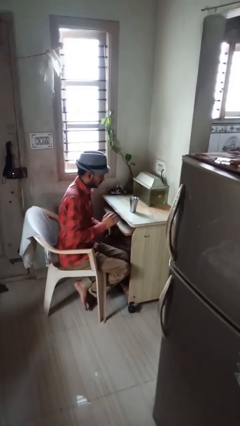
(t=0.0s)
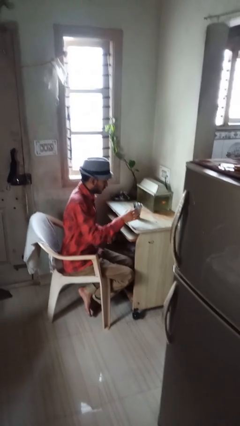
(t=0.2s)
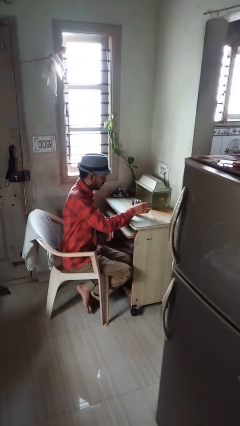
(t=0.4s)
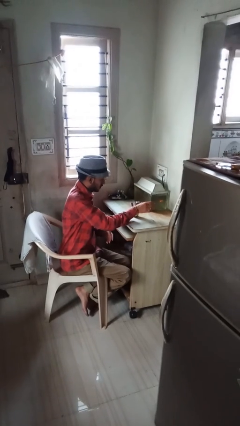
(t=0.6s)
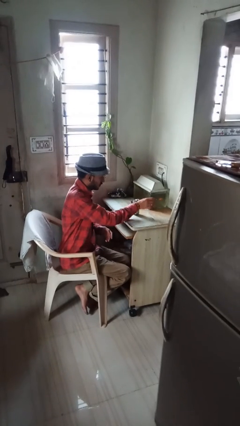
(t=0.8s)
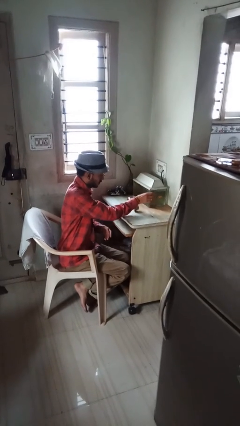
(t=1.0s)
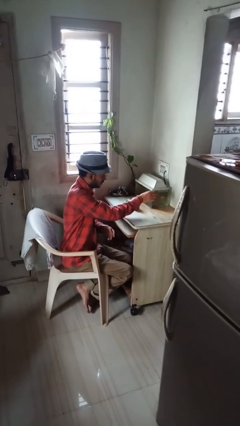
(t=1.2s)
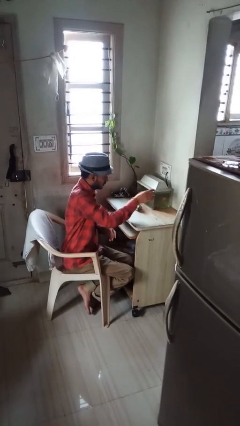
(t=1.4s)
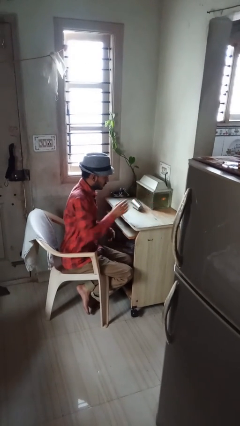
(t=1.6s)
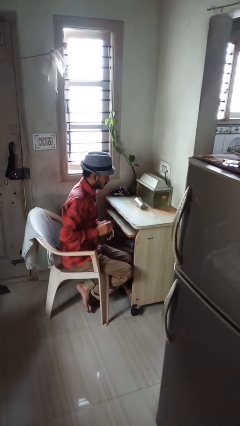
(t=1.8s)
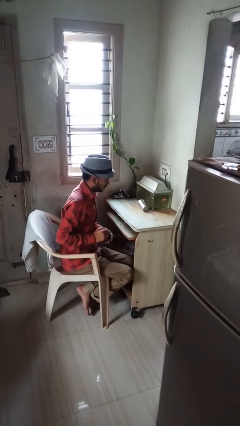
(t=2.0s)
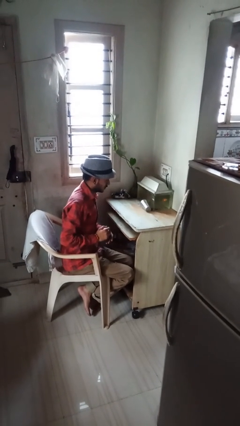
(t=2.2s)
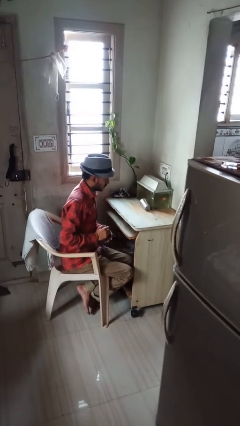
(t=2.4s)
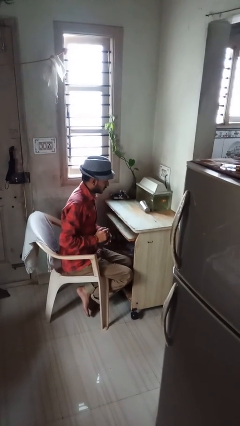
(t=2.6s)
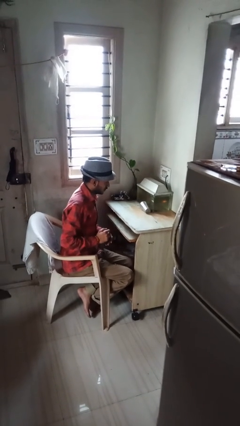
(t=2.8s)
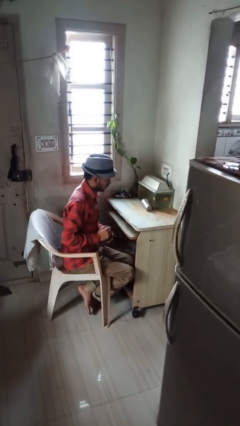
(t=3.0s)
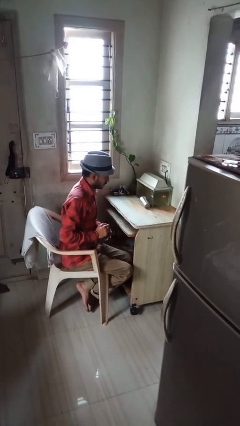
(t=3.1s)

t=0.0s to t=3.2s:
person knocks over glass

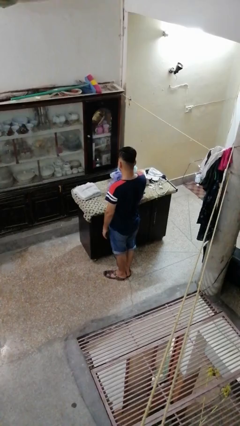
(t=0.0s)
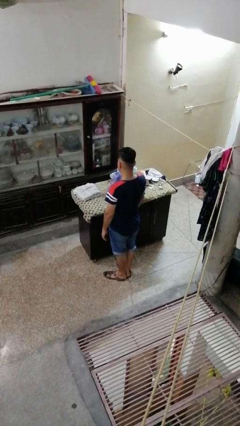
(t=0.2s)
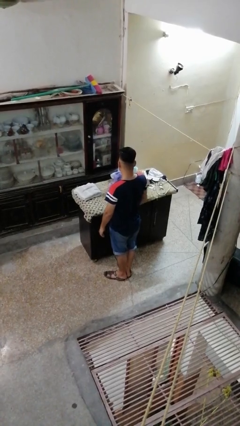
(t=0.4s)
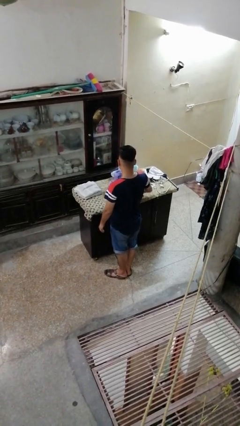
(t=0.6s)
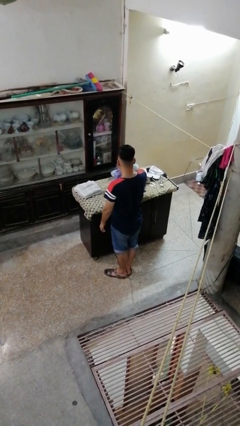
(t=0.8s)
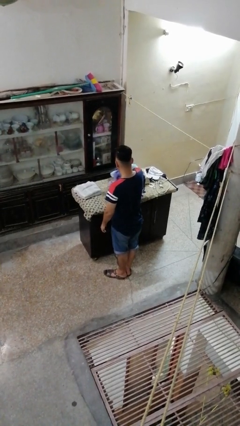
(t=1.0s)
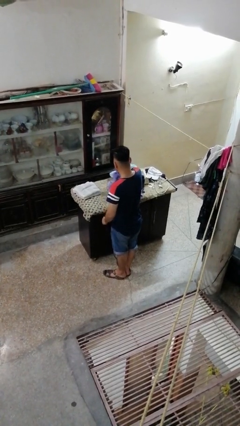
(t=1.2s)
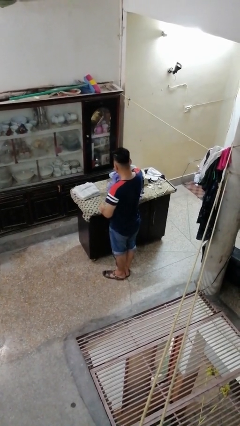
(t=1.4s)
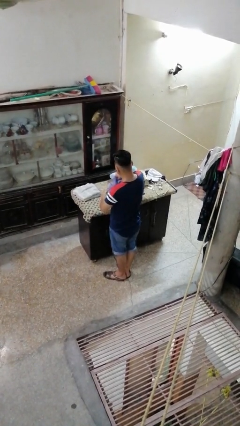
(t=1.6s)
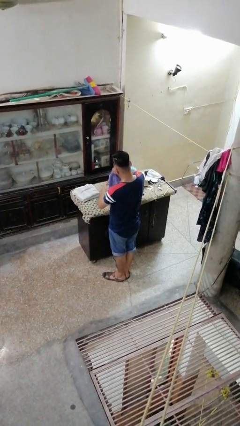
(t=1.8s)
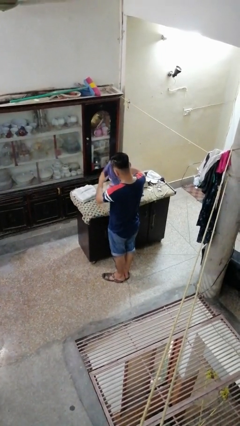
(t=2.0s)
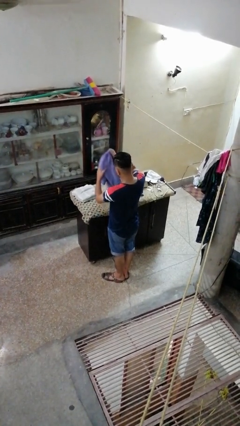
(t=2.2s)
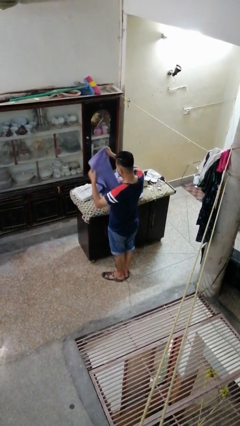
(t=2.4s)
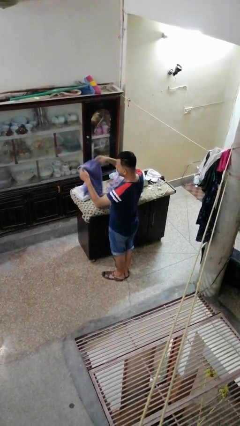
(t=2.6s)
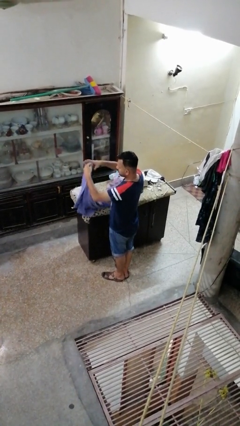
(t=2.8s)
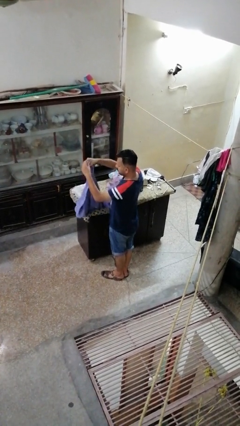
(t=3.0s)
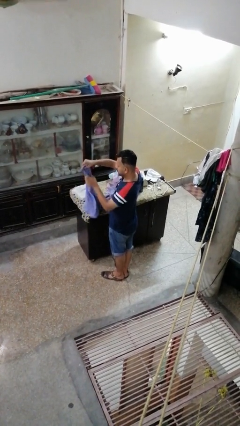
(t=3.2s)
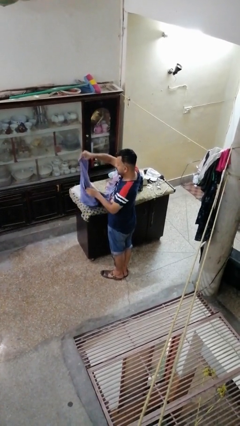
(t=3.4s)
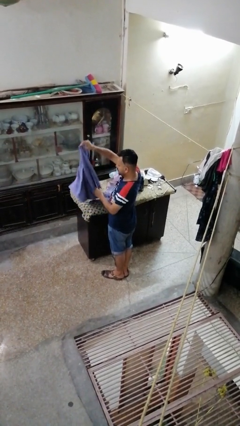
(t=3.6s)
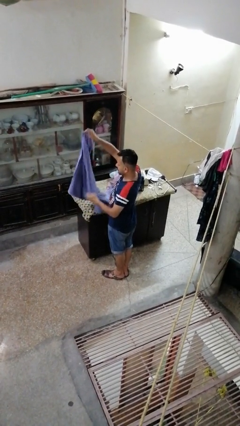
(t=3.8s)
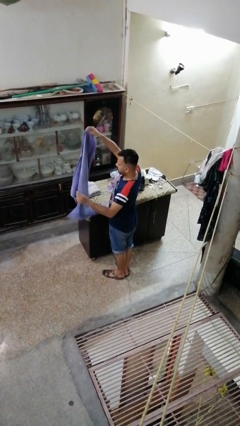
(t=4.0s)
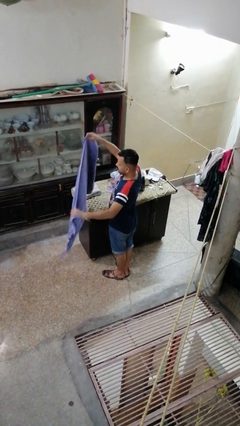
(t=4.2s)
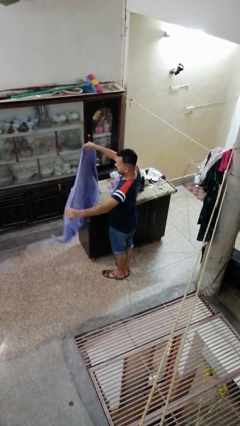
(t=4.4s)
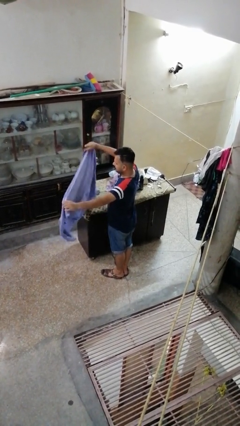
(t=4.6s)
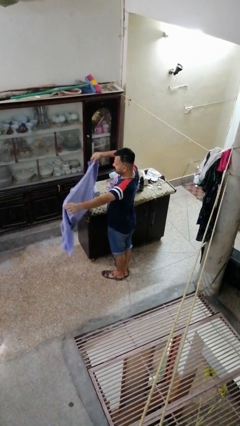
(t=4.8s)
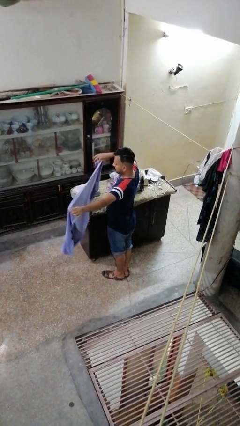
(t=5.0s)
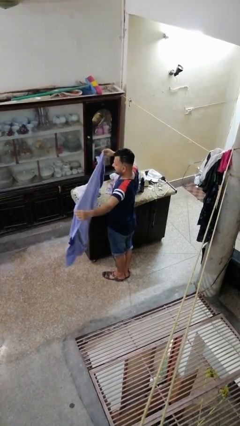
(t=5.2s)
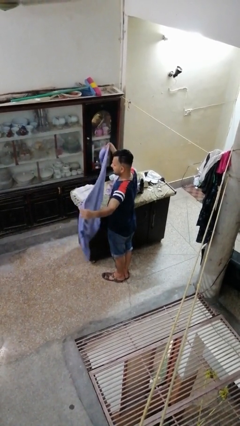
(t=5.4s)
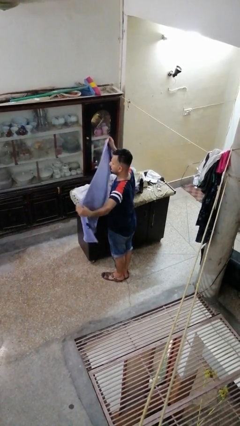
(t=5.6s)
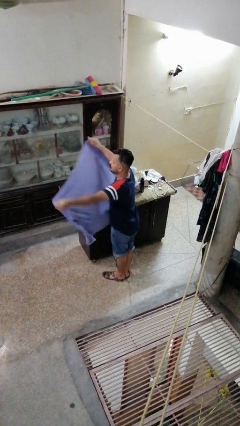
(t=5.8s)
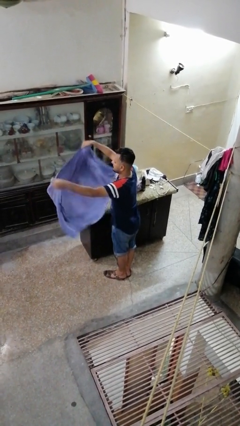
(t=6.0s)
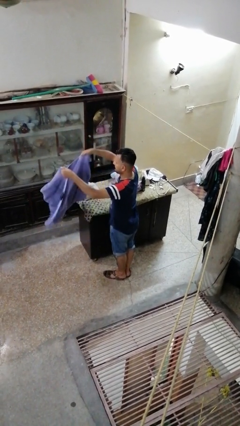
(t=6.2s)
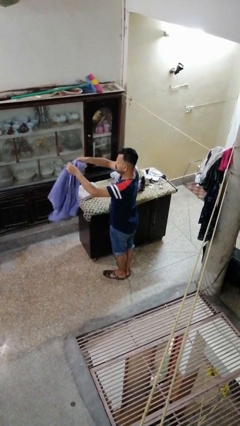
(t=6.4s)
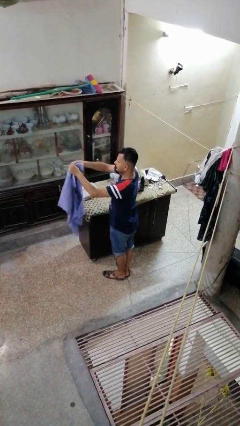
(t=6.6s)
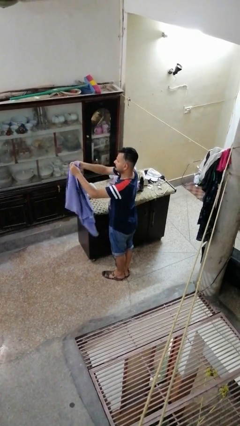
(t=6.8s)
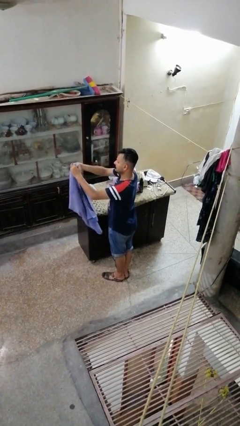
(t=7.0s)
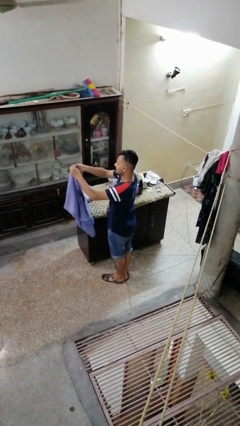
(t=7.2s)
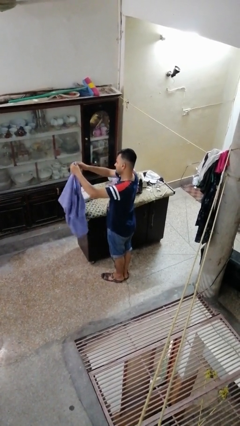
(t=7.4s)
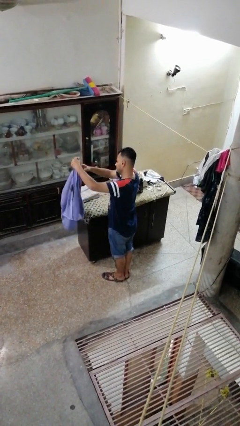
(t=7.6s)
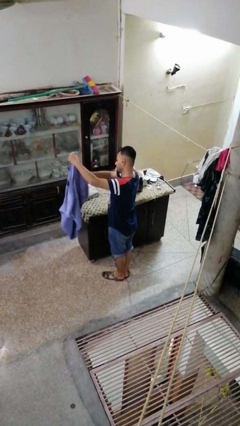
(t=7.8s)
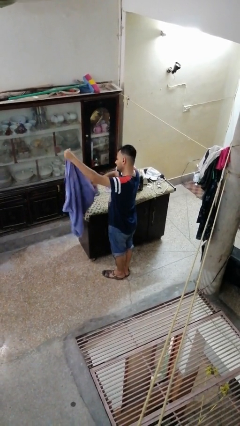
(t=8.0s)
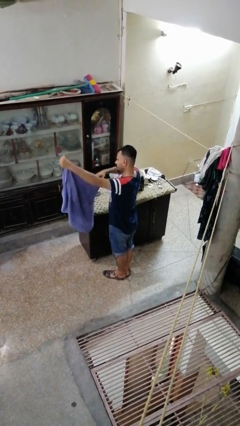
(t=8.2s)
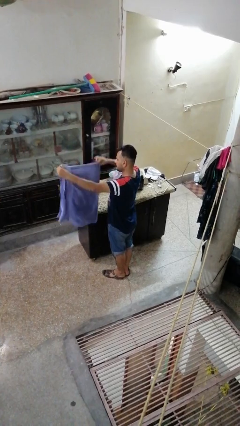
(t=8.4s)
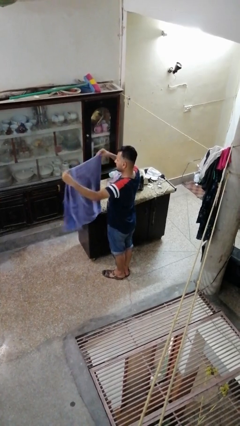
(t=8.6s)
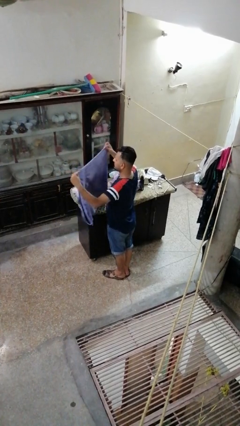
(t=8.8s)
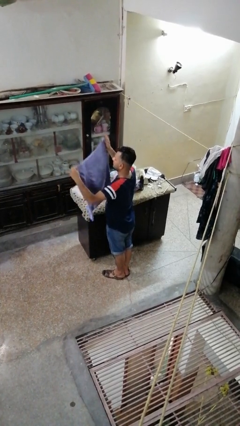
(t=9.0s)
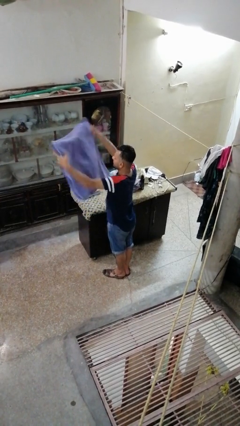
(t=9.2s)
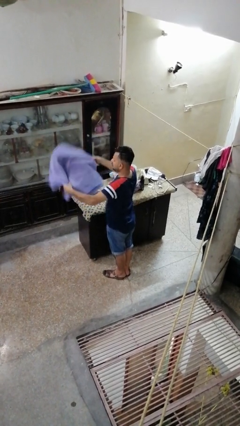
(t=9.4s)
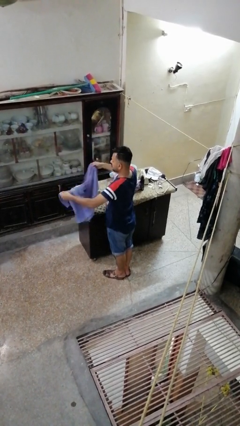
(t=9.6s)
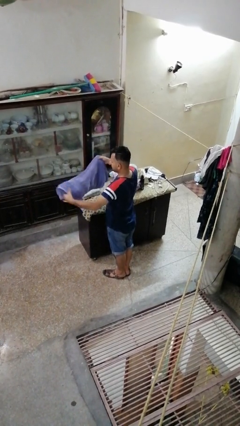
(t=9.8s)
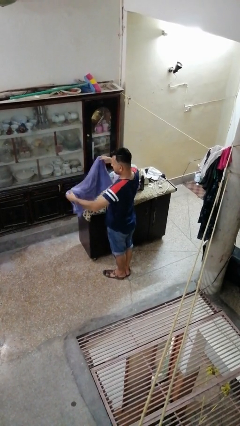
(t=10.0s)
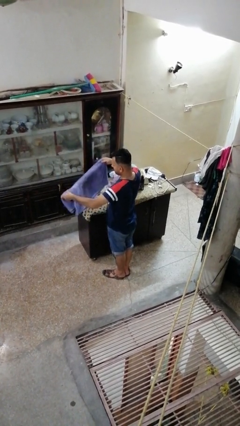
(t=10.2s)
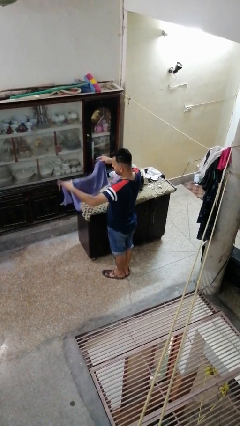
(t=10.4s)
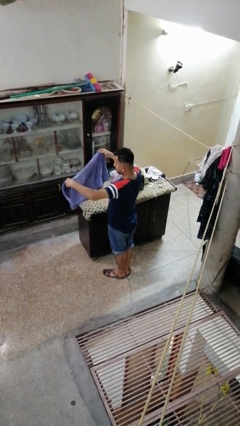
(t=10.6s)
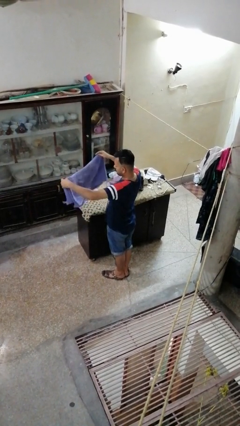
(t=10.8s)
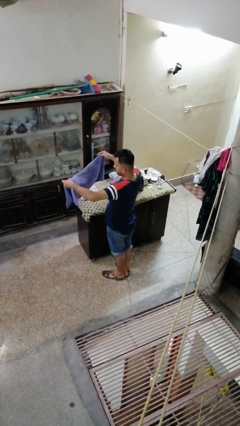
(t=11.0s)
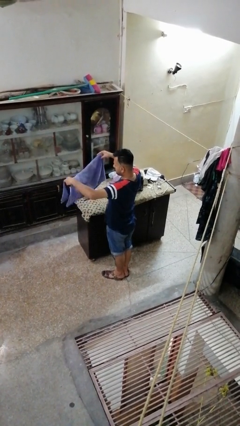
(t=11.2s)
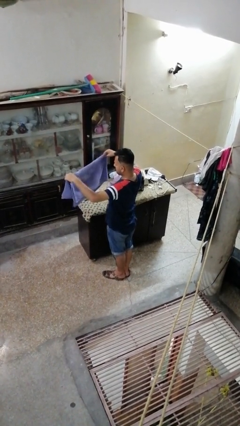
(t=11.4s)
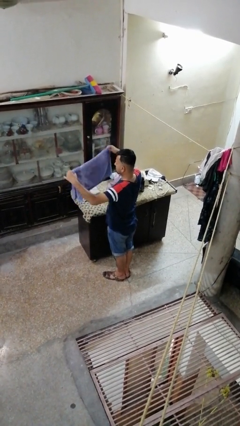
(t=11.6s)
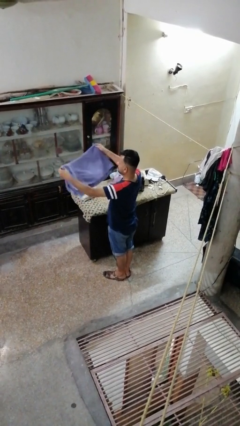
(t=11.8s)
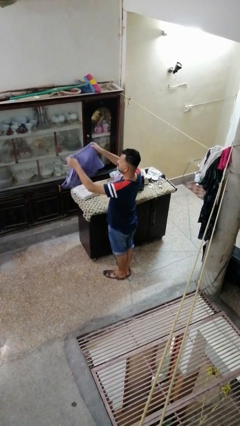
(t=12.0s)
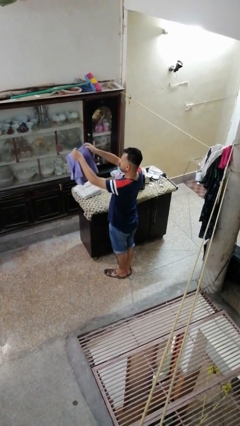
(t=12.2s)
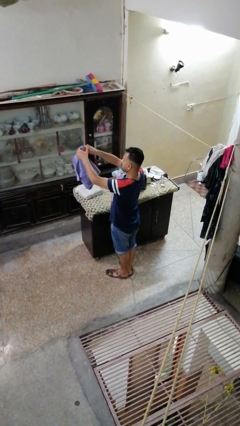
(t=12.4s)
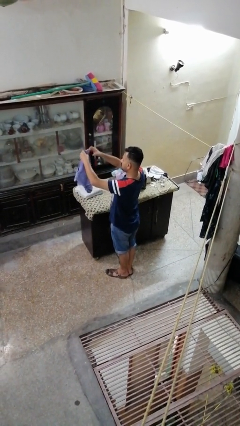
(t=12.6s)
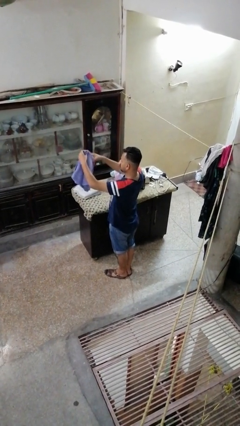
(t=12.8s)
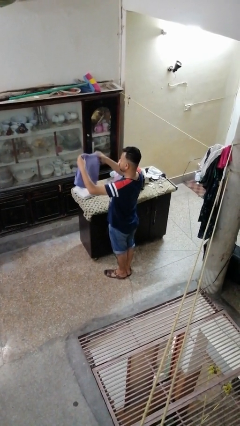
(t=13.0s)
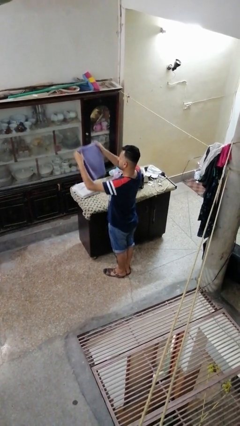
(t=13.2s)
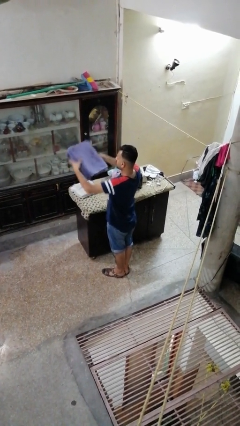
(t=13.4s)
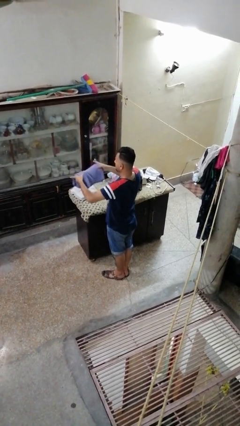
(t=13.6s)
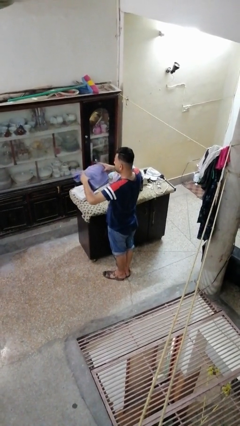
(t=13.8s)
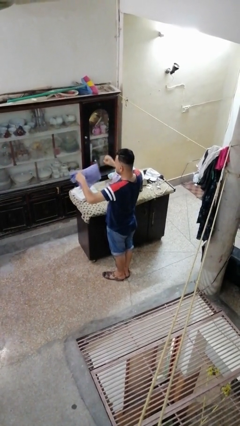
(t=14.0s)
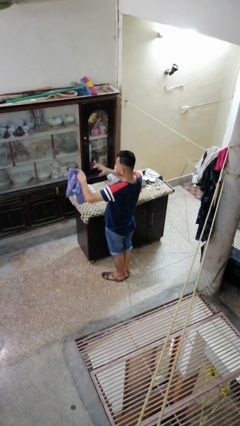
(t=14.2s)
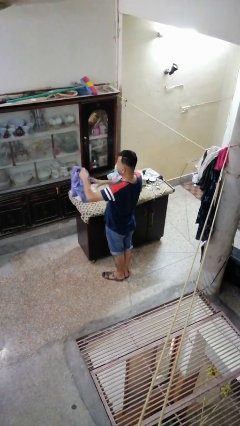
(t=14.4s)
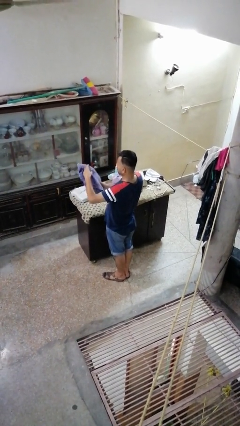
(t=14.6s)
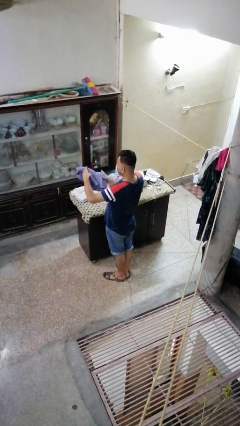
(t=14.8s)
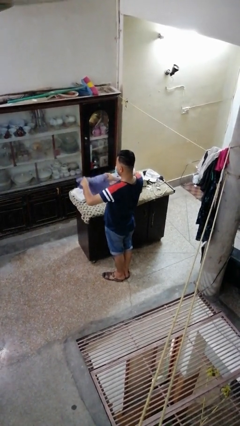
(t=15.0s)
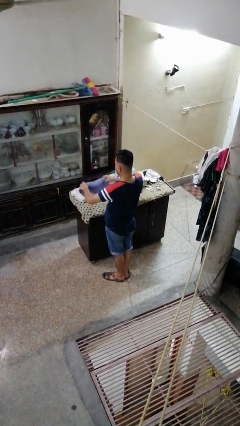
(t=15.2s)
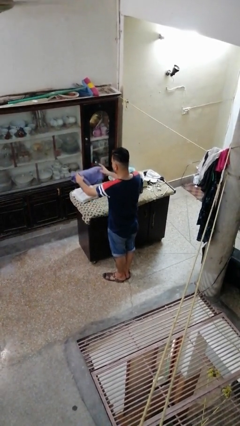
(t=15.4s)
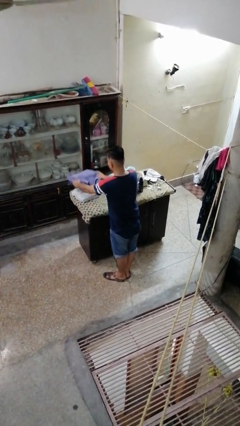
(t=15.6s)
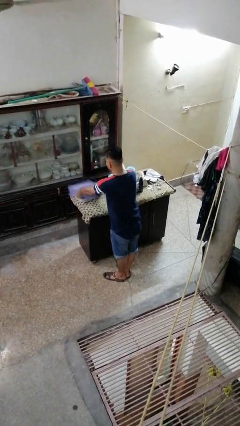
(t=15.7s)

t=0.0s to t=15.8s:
person folds towel
